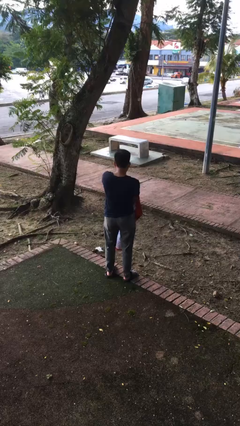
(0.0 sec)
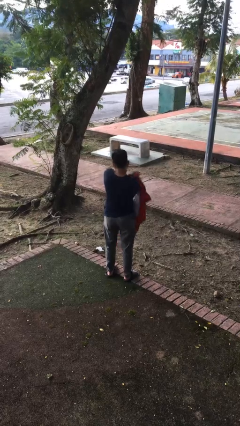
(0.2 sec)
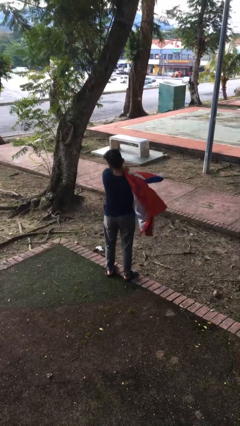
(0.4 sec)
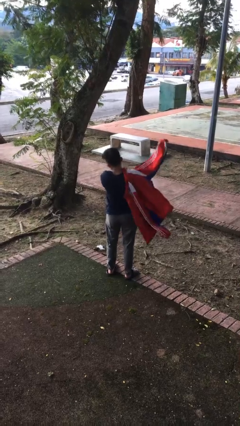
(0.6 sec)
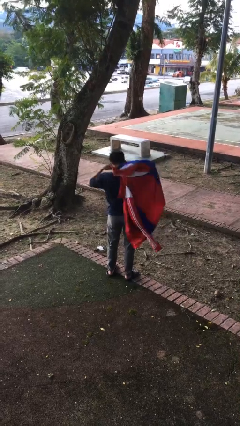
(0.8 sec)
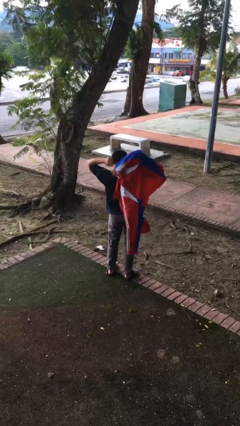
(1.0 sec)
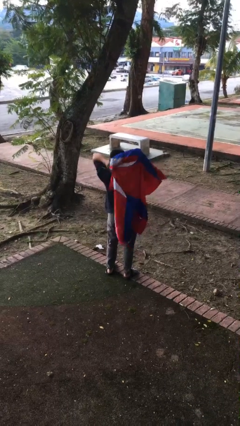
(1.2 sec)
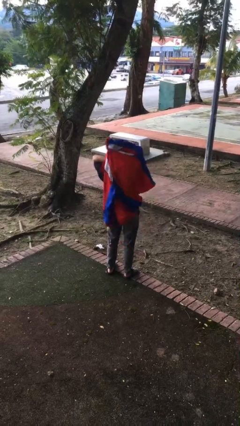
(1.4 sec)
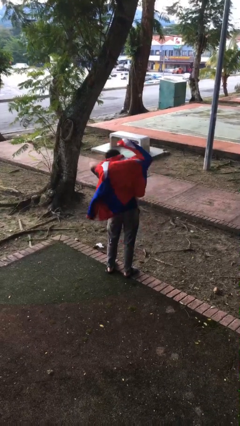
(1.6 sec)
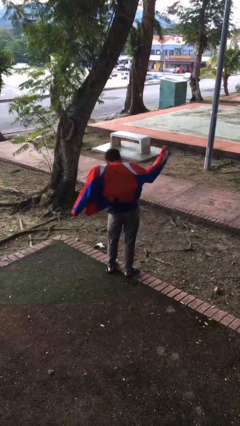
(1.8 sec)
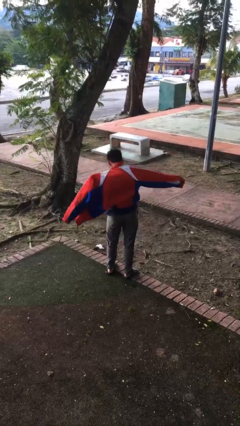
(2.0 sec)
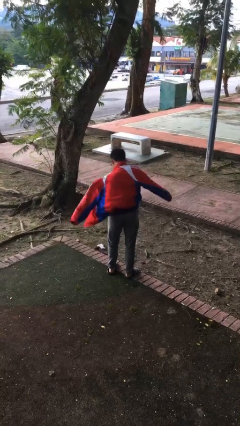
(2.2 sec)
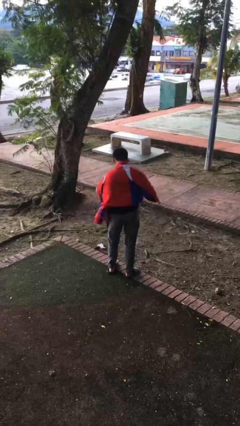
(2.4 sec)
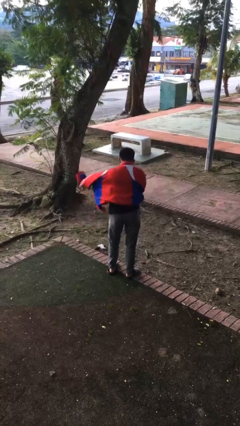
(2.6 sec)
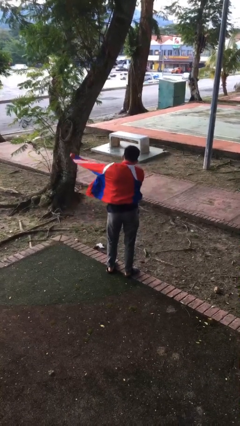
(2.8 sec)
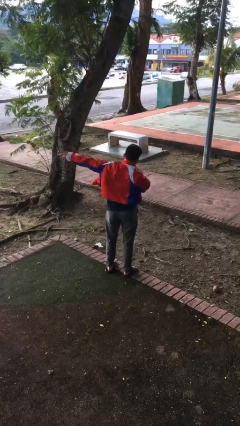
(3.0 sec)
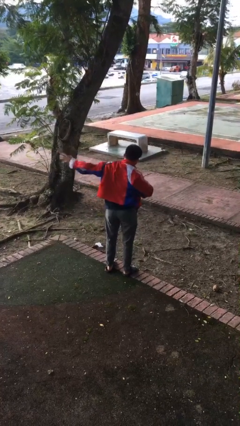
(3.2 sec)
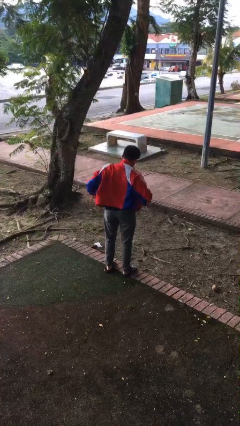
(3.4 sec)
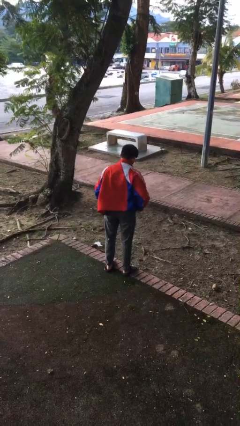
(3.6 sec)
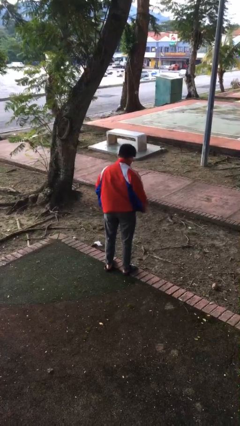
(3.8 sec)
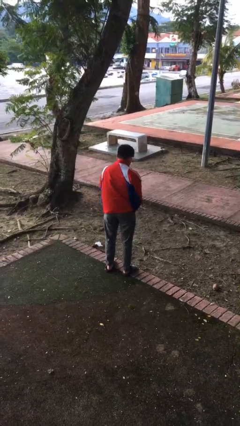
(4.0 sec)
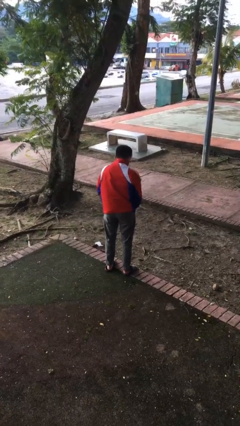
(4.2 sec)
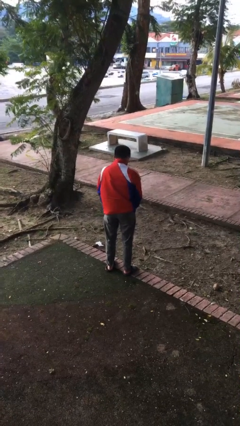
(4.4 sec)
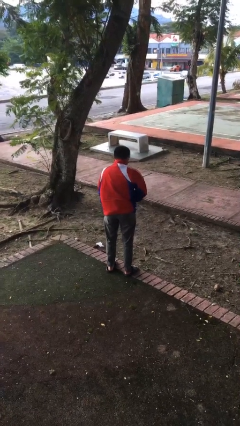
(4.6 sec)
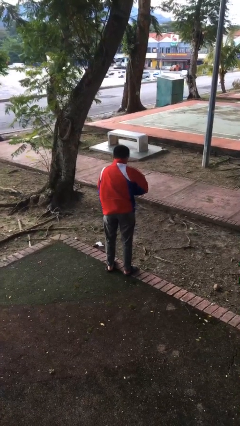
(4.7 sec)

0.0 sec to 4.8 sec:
person puts on jacket

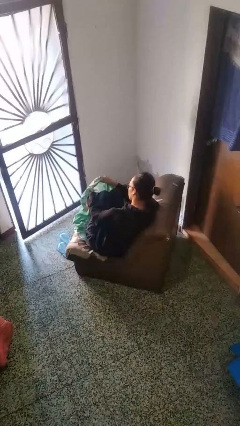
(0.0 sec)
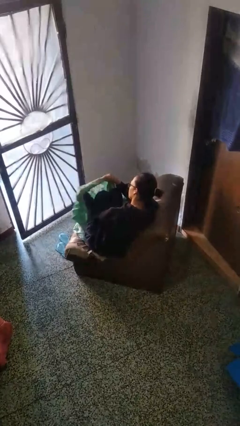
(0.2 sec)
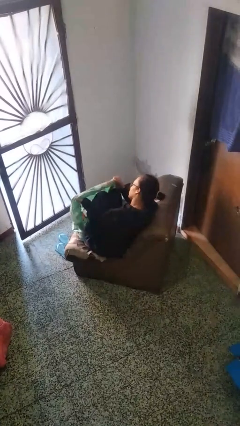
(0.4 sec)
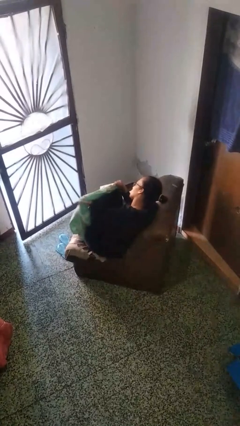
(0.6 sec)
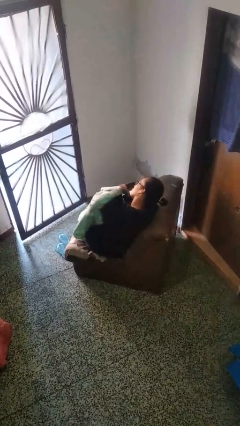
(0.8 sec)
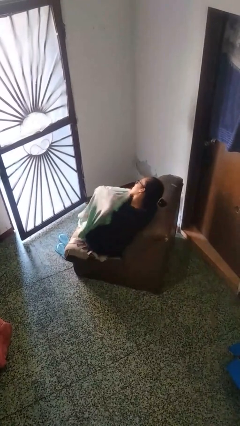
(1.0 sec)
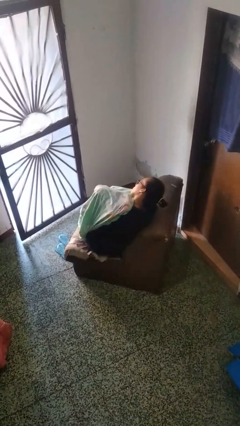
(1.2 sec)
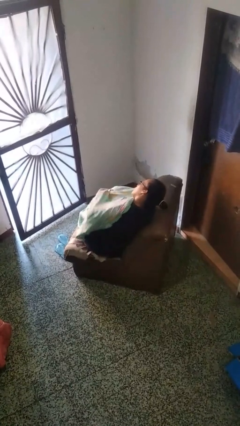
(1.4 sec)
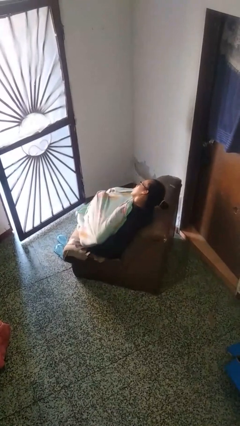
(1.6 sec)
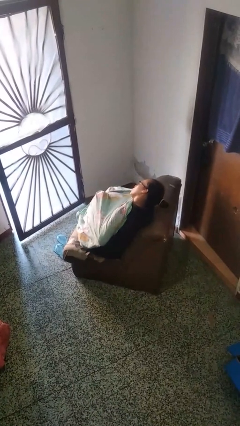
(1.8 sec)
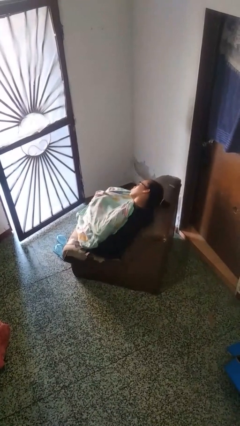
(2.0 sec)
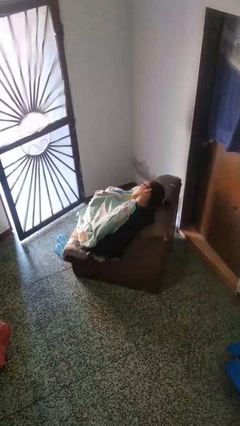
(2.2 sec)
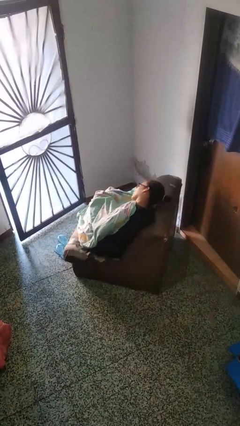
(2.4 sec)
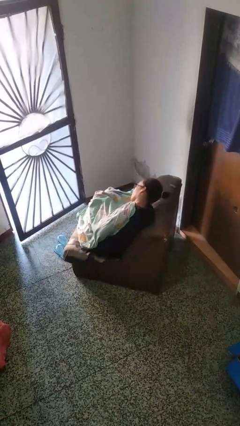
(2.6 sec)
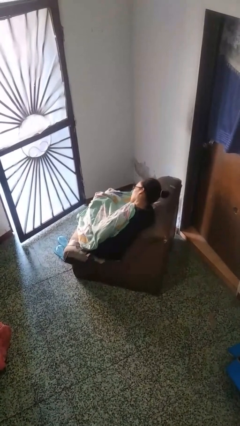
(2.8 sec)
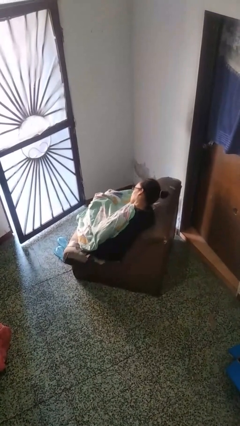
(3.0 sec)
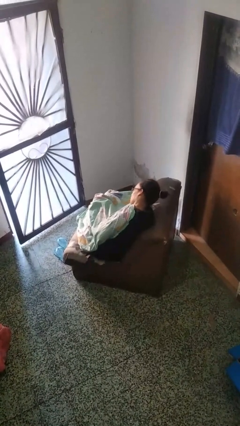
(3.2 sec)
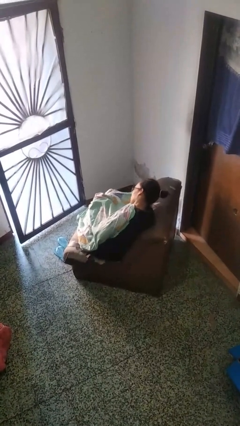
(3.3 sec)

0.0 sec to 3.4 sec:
person covers with blanket

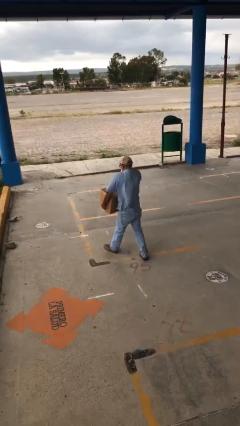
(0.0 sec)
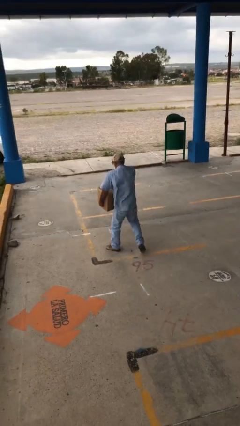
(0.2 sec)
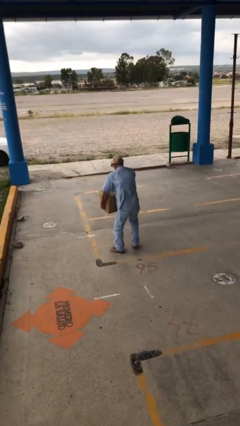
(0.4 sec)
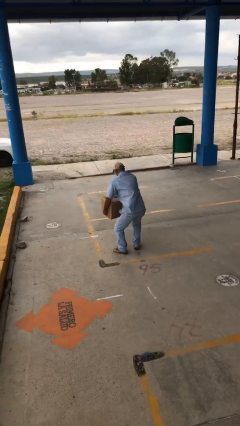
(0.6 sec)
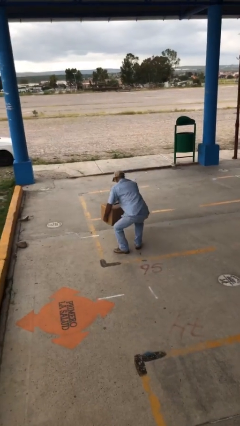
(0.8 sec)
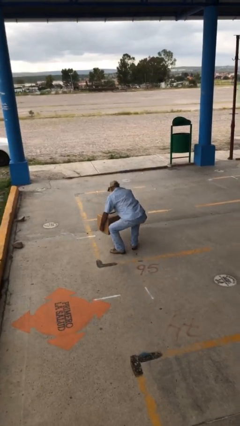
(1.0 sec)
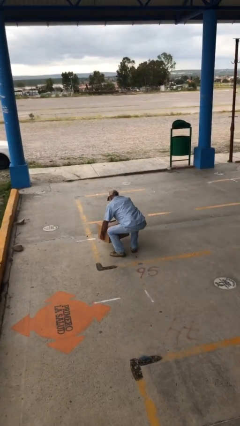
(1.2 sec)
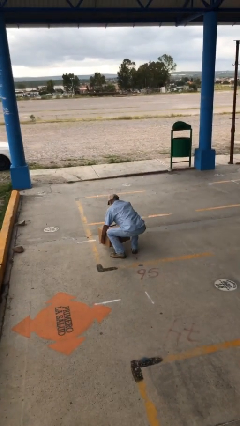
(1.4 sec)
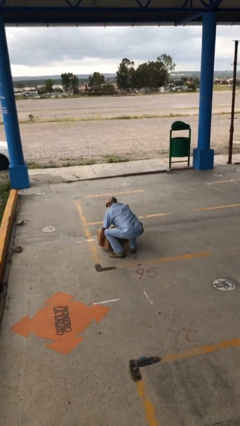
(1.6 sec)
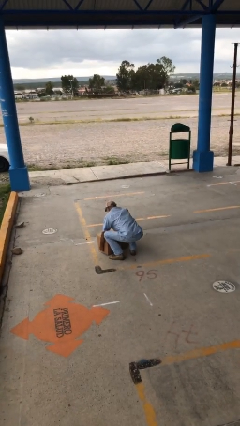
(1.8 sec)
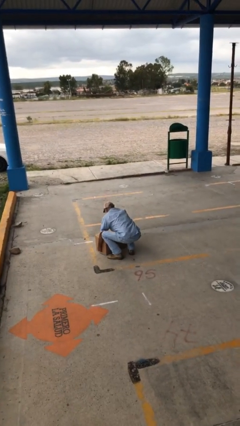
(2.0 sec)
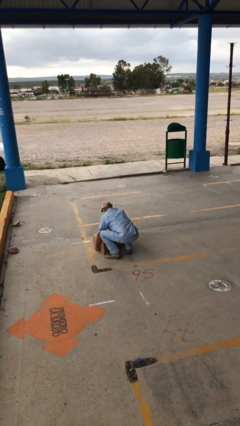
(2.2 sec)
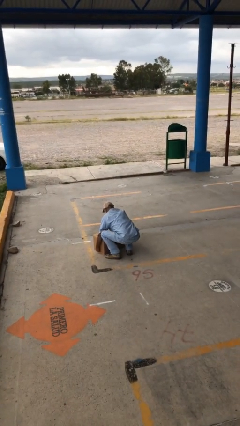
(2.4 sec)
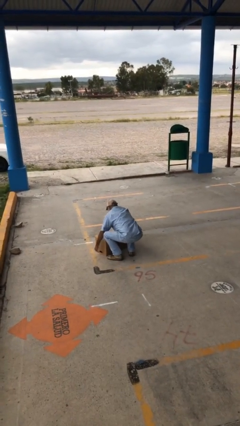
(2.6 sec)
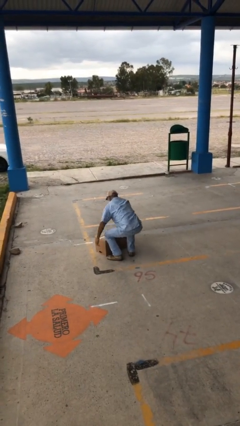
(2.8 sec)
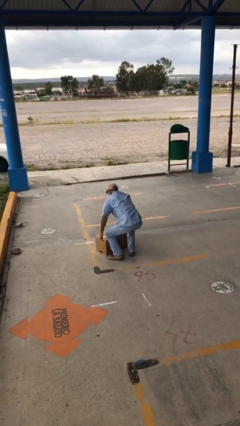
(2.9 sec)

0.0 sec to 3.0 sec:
person puts down object on floor

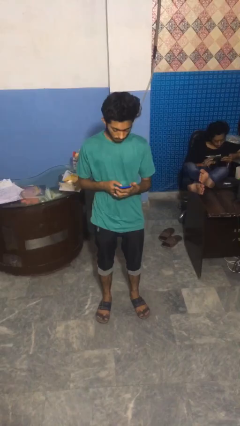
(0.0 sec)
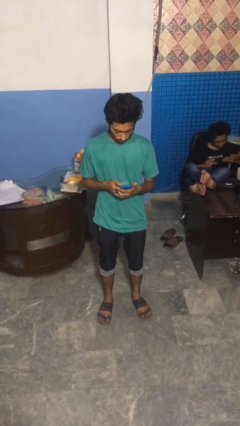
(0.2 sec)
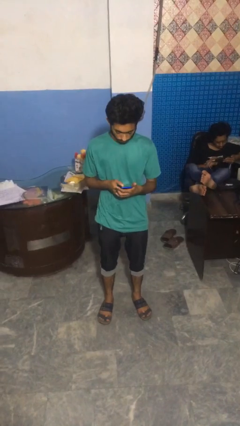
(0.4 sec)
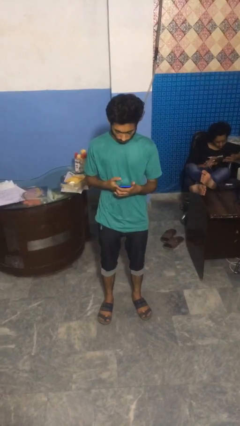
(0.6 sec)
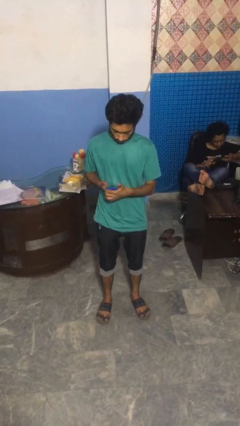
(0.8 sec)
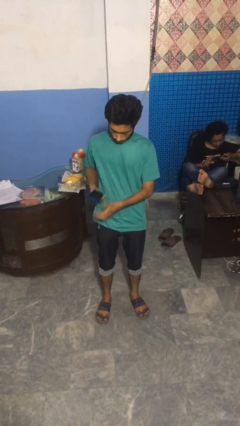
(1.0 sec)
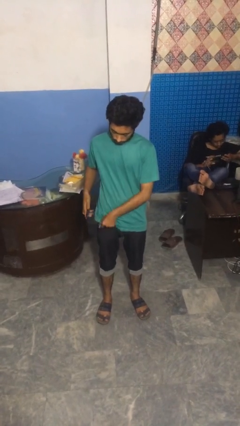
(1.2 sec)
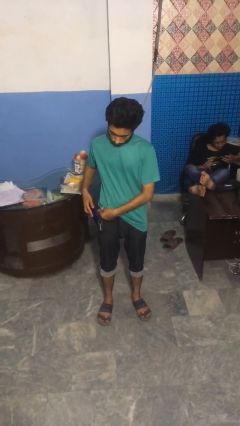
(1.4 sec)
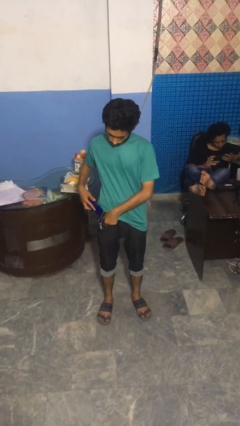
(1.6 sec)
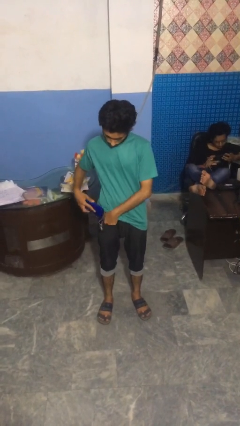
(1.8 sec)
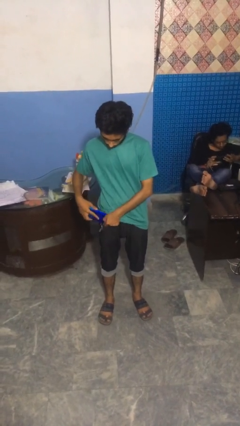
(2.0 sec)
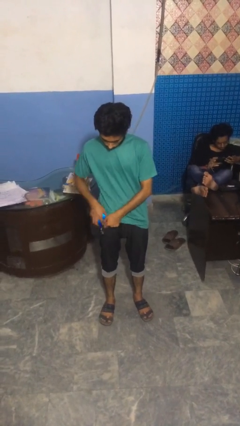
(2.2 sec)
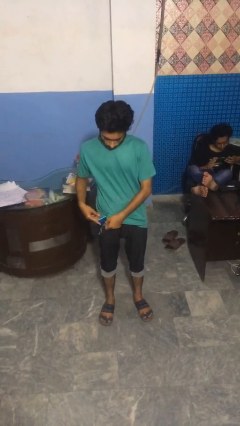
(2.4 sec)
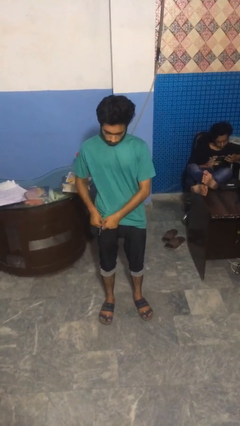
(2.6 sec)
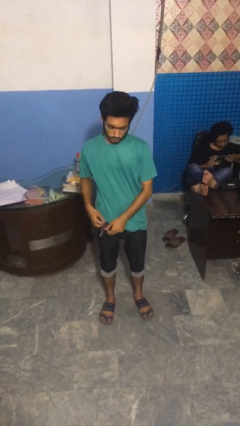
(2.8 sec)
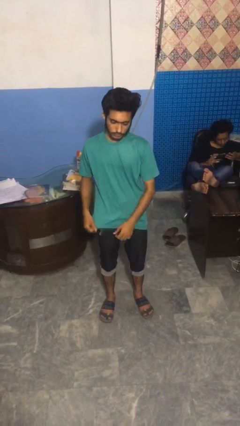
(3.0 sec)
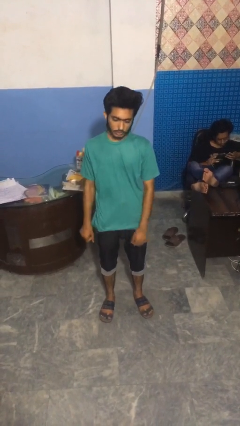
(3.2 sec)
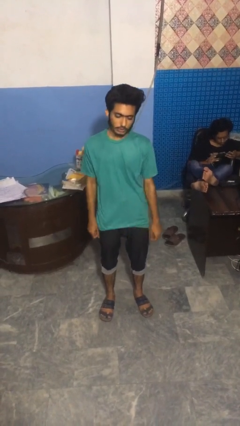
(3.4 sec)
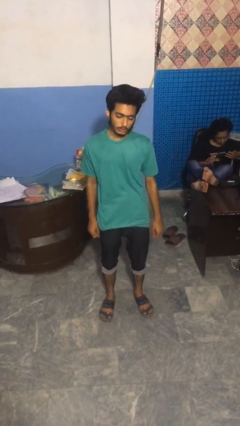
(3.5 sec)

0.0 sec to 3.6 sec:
person puts phone into pocket

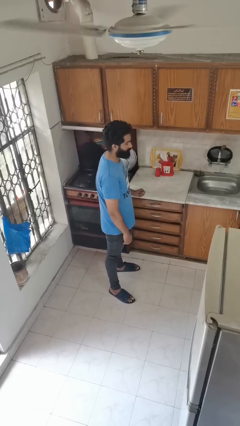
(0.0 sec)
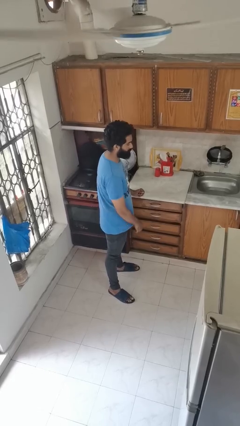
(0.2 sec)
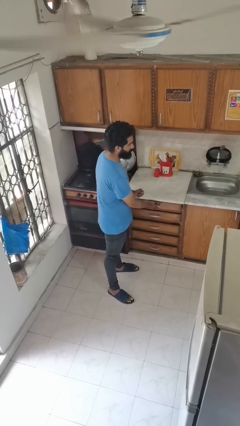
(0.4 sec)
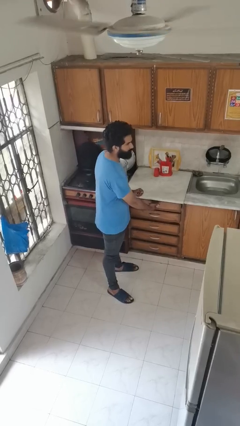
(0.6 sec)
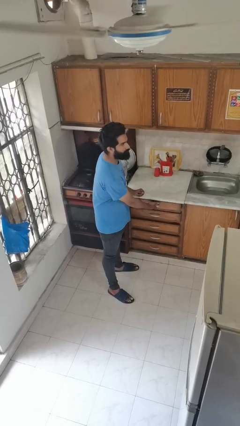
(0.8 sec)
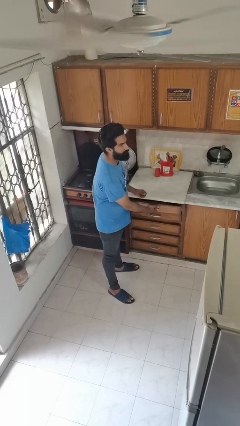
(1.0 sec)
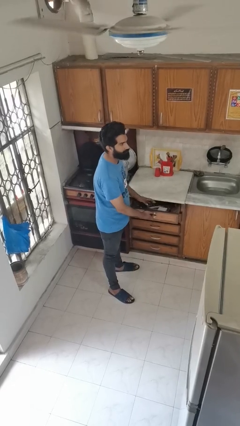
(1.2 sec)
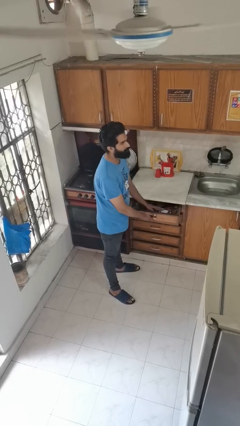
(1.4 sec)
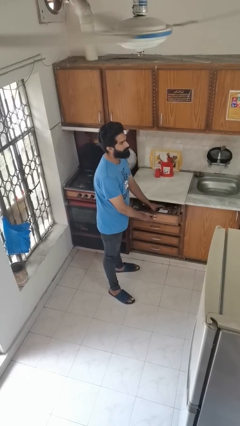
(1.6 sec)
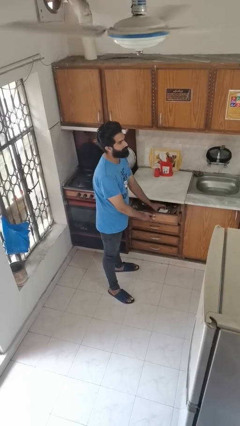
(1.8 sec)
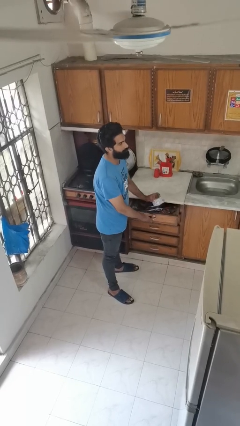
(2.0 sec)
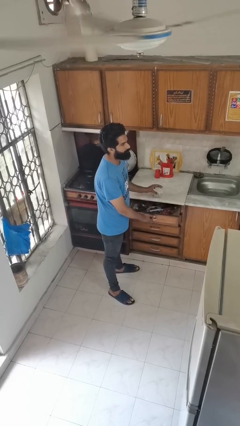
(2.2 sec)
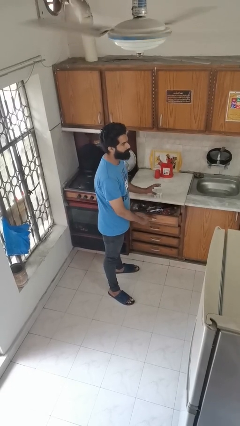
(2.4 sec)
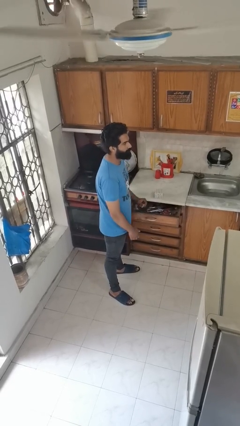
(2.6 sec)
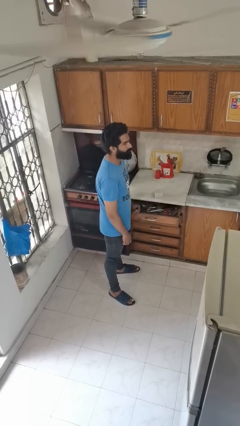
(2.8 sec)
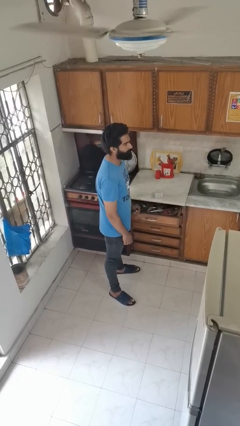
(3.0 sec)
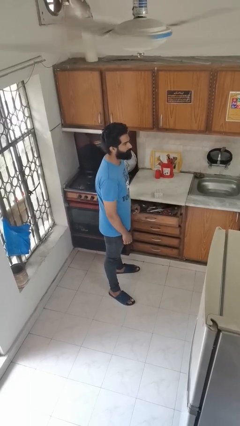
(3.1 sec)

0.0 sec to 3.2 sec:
person takes object from kitchen drawer
